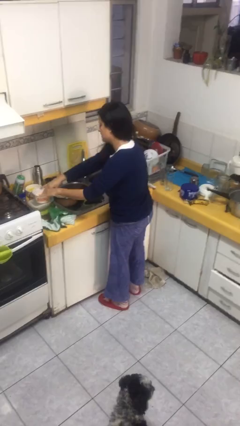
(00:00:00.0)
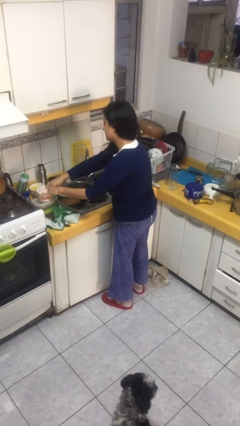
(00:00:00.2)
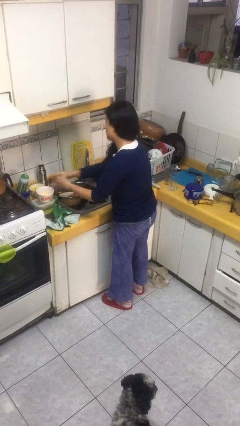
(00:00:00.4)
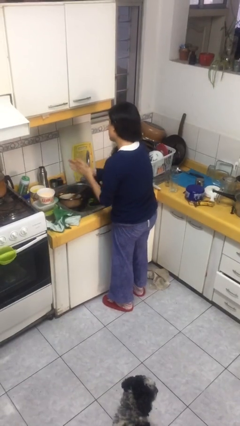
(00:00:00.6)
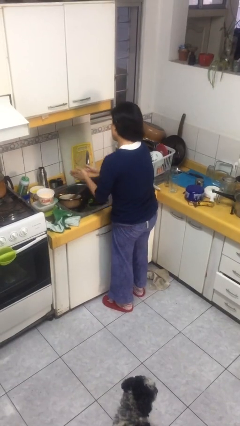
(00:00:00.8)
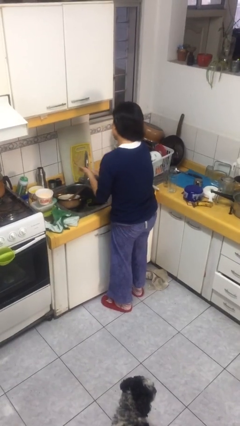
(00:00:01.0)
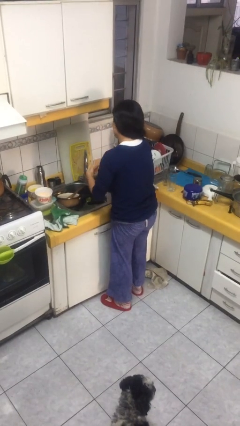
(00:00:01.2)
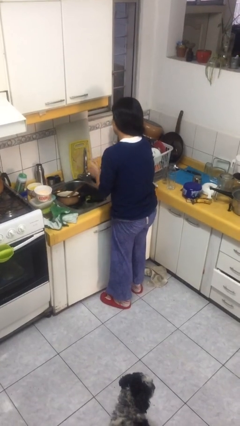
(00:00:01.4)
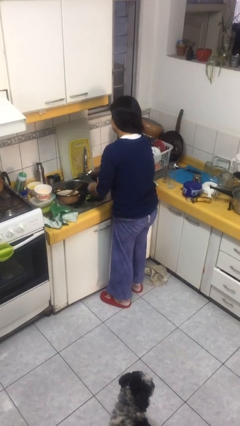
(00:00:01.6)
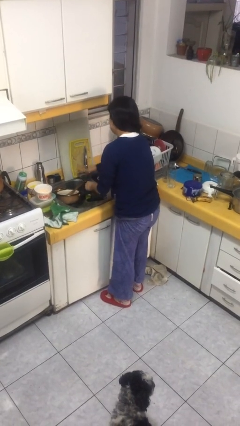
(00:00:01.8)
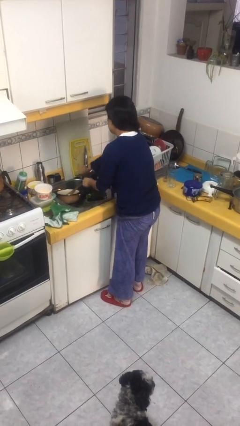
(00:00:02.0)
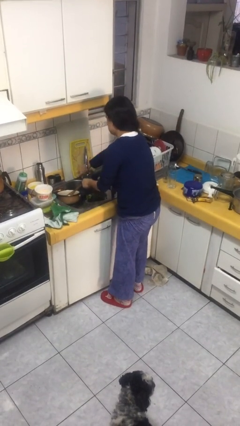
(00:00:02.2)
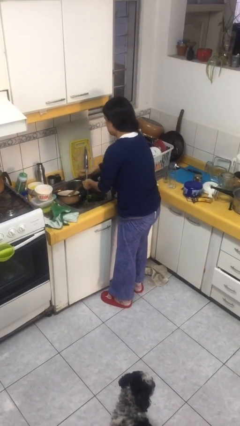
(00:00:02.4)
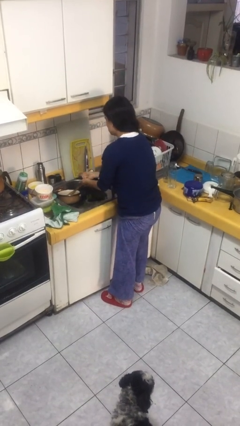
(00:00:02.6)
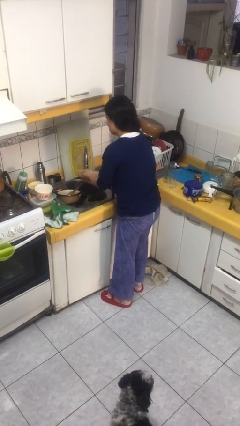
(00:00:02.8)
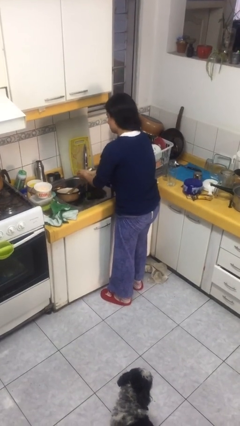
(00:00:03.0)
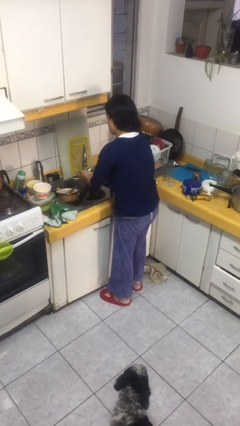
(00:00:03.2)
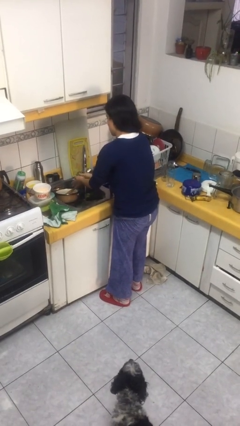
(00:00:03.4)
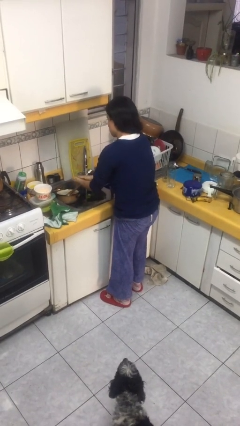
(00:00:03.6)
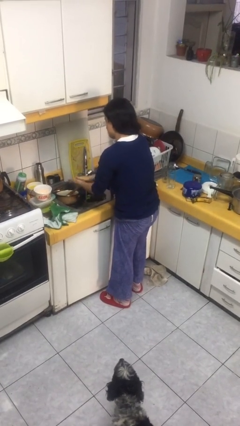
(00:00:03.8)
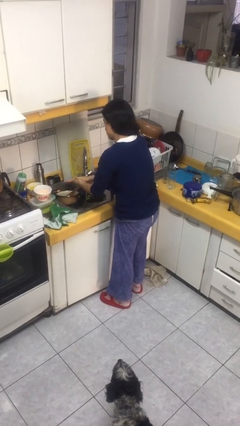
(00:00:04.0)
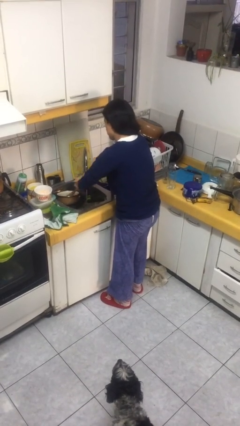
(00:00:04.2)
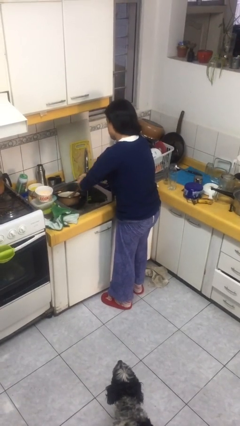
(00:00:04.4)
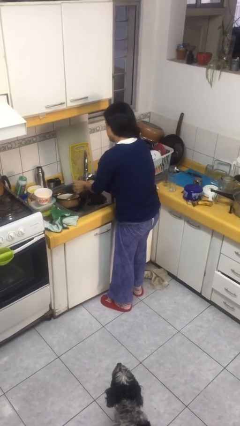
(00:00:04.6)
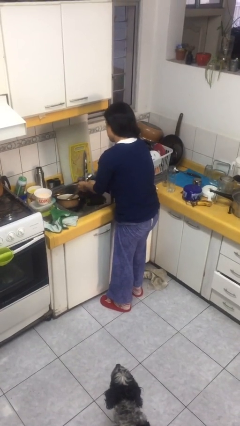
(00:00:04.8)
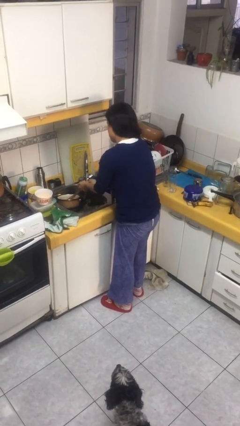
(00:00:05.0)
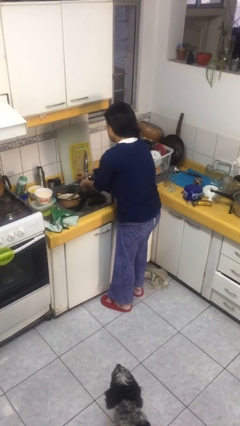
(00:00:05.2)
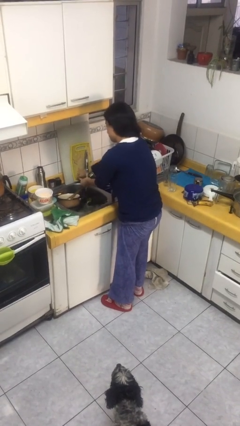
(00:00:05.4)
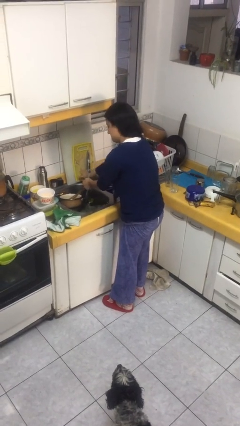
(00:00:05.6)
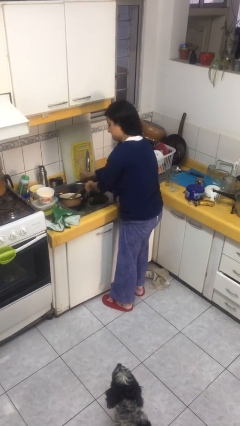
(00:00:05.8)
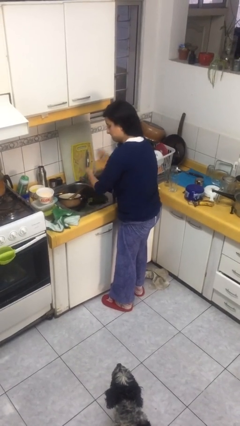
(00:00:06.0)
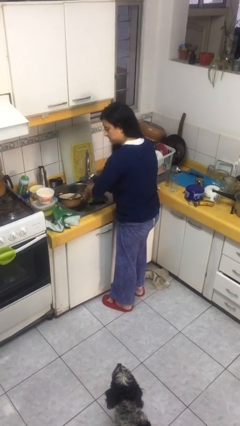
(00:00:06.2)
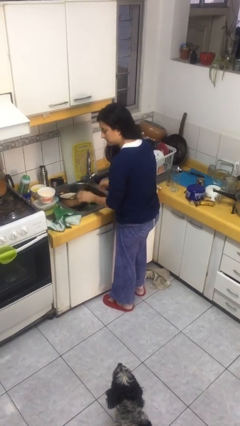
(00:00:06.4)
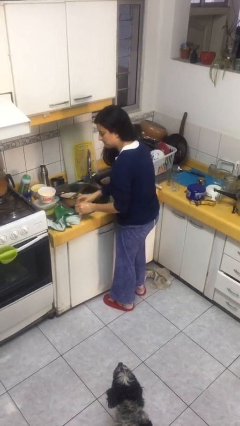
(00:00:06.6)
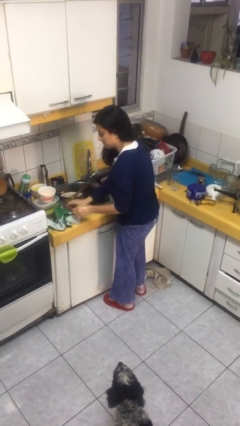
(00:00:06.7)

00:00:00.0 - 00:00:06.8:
person washes hands

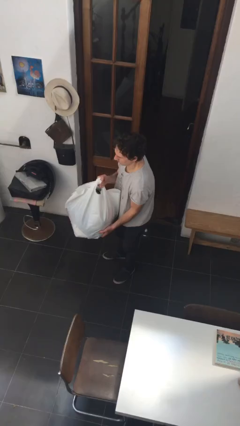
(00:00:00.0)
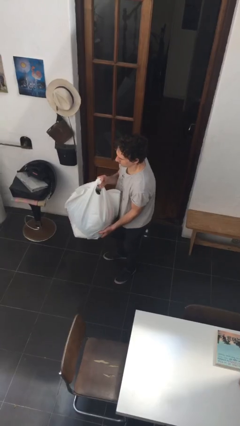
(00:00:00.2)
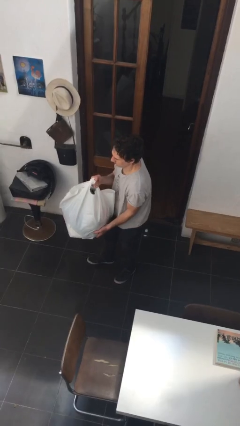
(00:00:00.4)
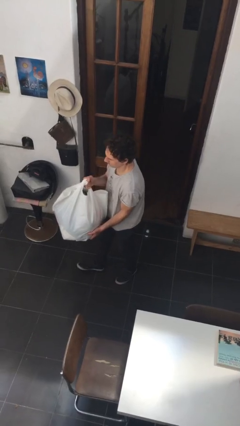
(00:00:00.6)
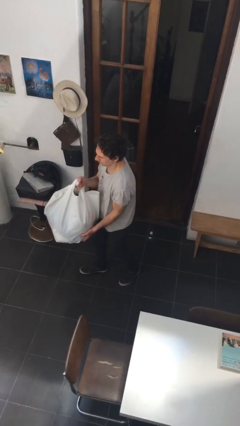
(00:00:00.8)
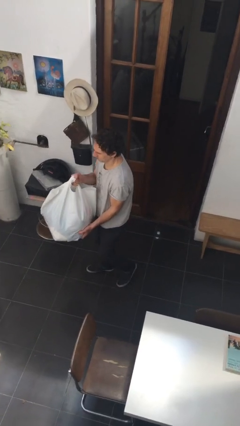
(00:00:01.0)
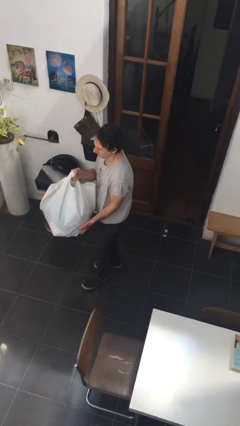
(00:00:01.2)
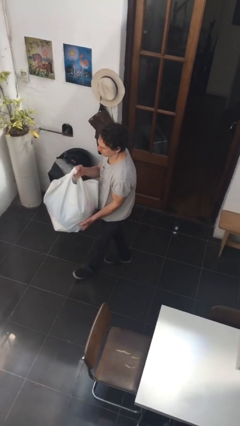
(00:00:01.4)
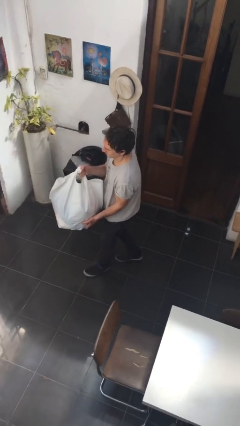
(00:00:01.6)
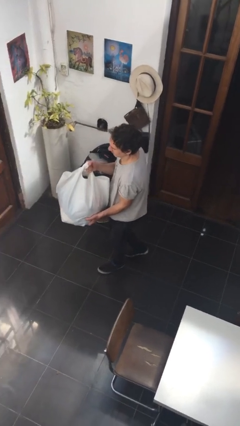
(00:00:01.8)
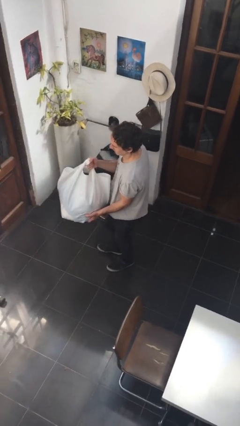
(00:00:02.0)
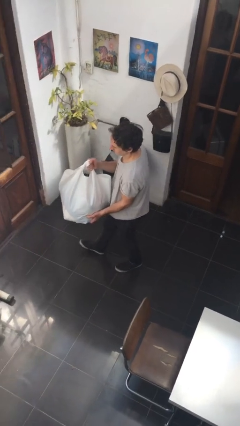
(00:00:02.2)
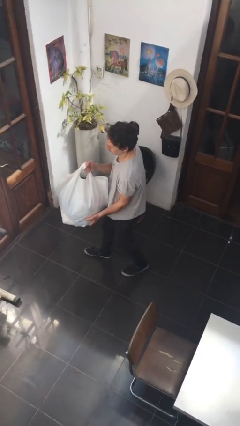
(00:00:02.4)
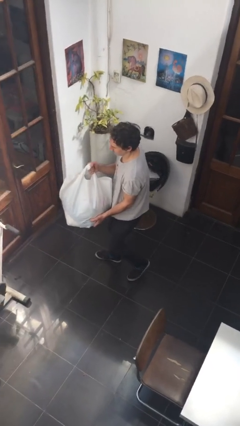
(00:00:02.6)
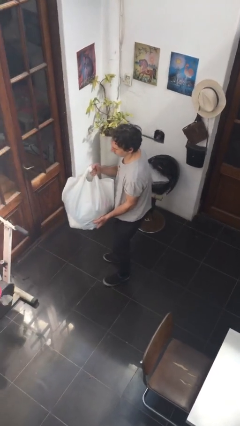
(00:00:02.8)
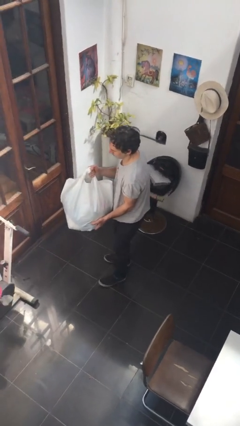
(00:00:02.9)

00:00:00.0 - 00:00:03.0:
person carries heavy object

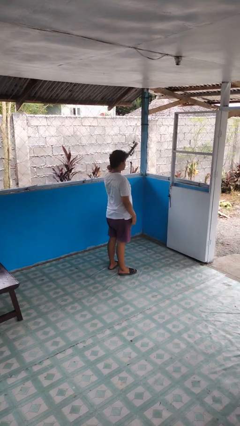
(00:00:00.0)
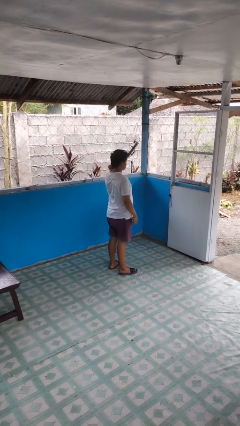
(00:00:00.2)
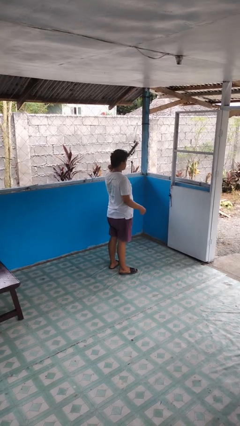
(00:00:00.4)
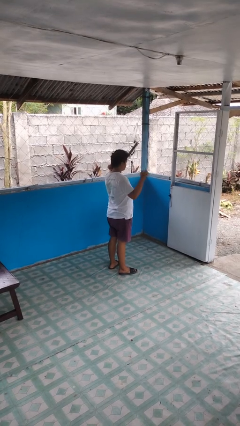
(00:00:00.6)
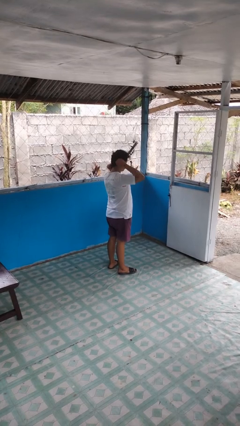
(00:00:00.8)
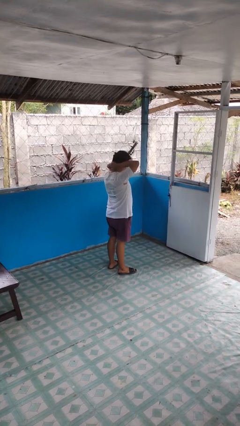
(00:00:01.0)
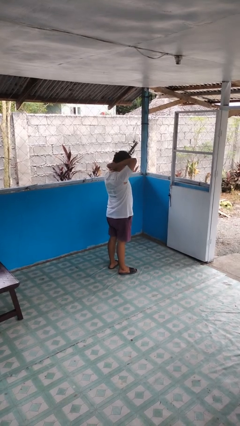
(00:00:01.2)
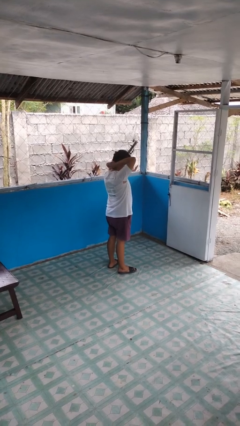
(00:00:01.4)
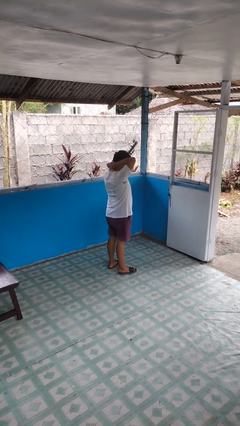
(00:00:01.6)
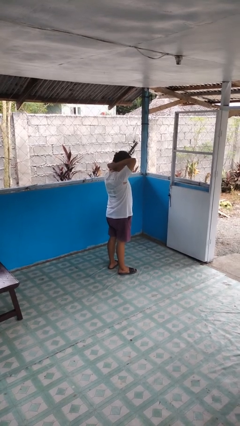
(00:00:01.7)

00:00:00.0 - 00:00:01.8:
person takes off necklace

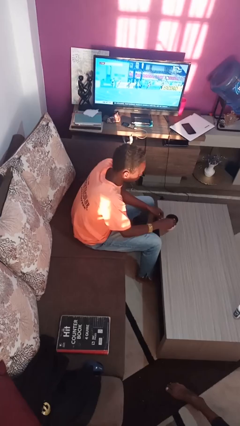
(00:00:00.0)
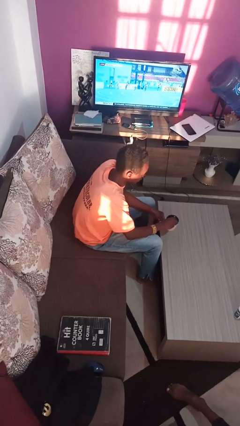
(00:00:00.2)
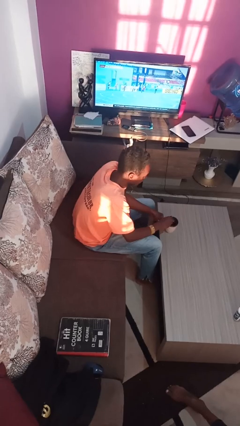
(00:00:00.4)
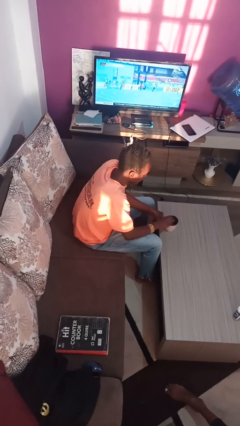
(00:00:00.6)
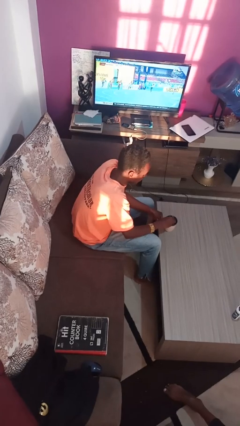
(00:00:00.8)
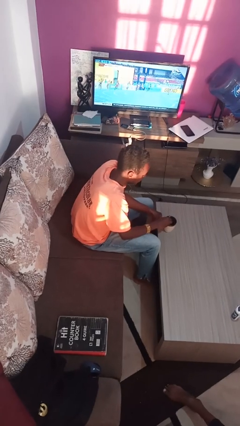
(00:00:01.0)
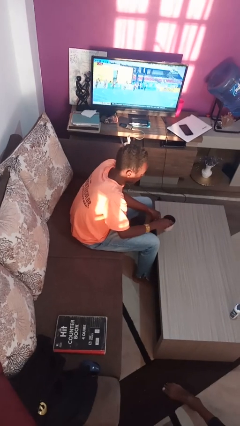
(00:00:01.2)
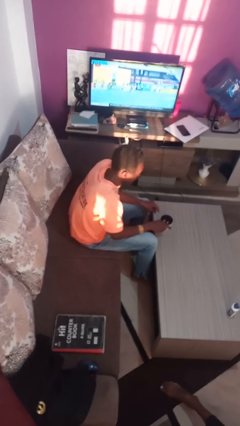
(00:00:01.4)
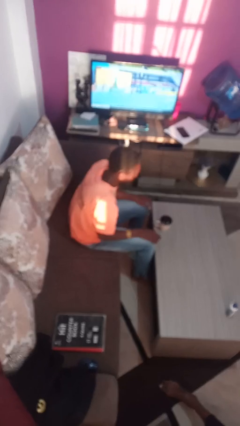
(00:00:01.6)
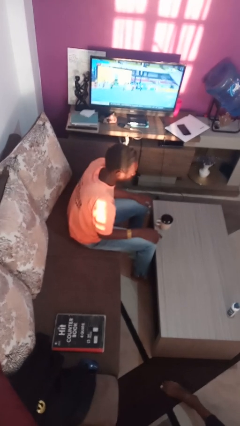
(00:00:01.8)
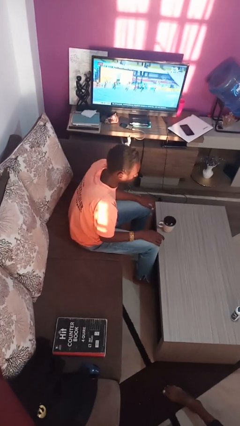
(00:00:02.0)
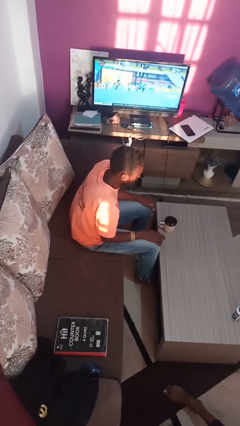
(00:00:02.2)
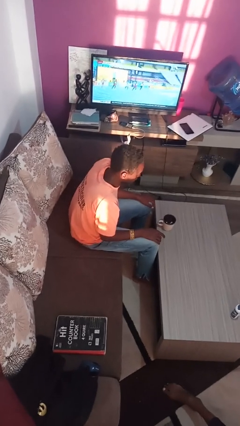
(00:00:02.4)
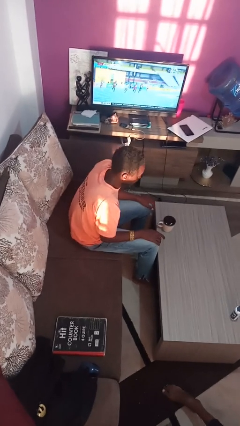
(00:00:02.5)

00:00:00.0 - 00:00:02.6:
person stirs mug

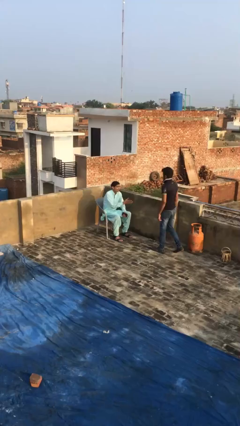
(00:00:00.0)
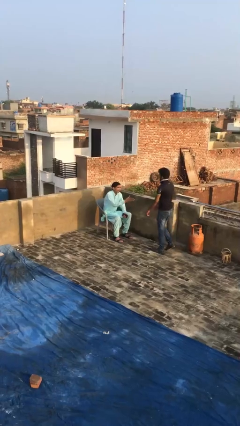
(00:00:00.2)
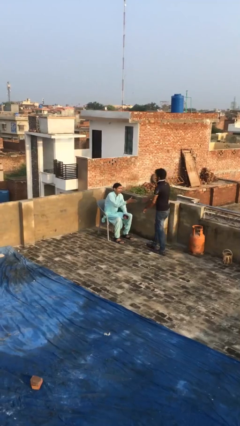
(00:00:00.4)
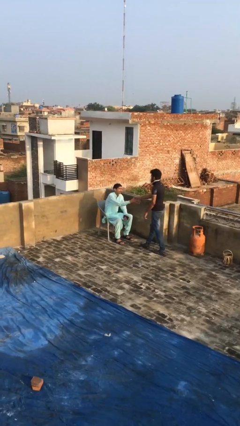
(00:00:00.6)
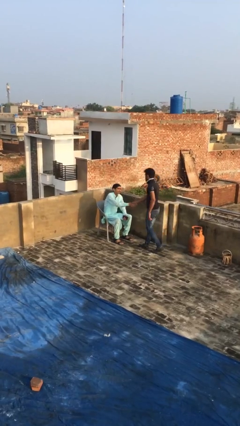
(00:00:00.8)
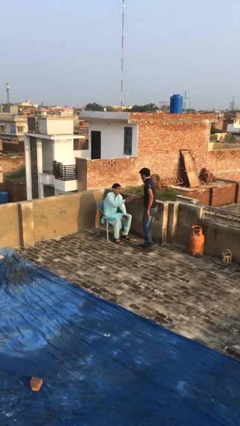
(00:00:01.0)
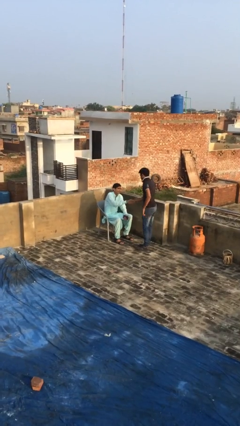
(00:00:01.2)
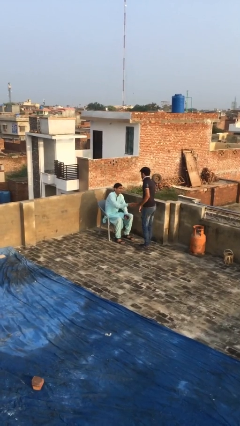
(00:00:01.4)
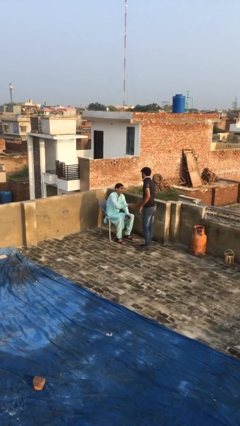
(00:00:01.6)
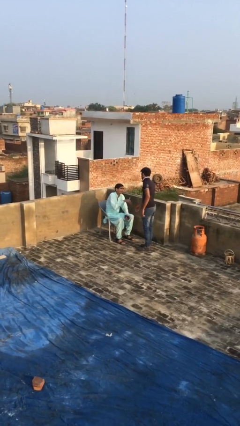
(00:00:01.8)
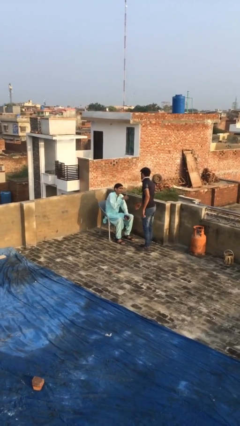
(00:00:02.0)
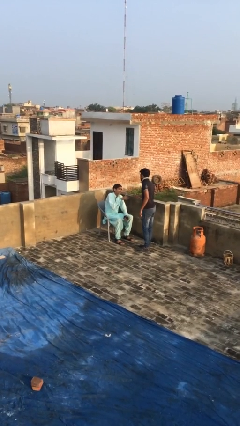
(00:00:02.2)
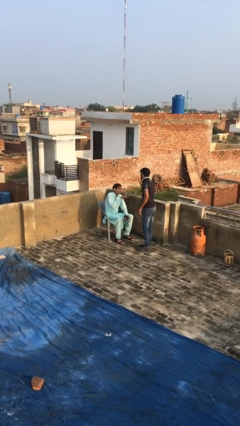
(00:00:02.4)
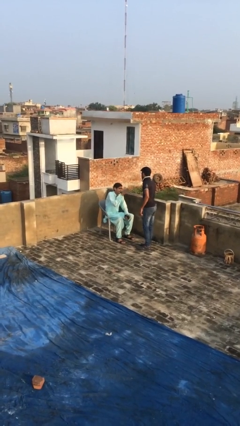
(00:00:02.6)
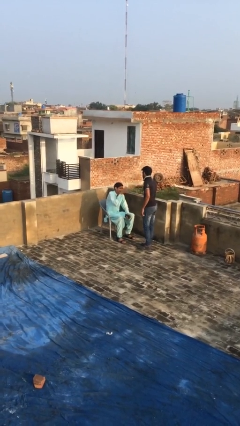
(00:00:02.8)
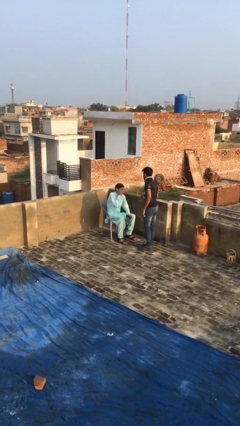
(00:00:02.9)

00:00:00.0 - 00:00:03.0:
person shakes hand
